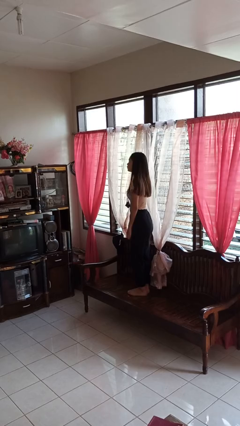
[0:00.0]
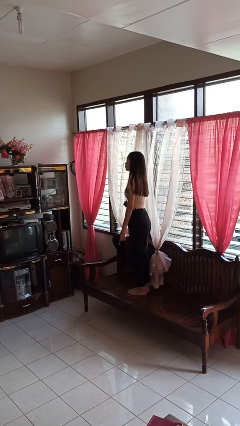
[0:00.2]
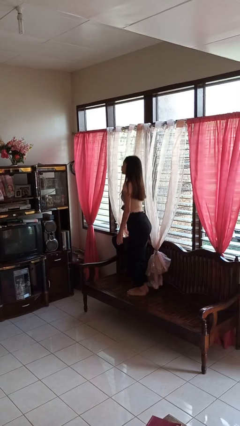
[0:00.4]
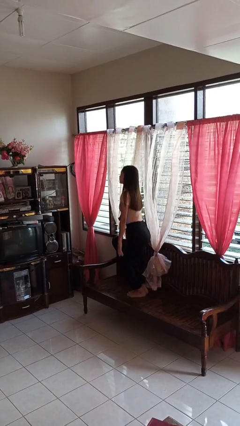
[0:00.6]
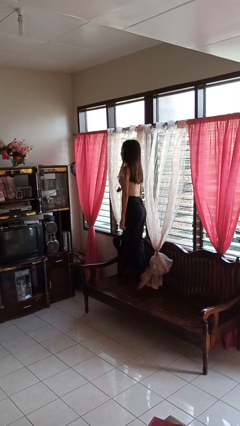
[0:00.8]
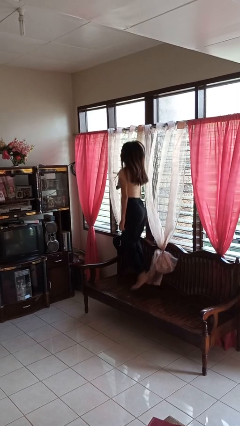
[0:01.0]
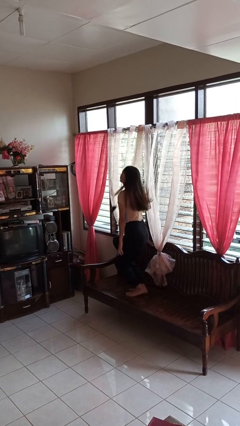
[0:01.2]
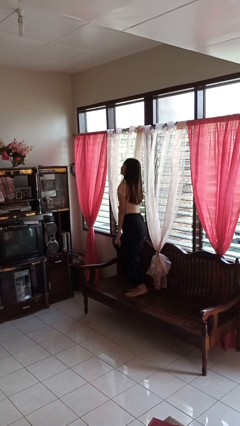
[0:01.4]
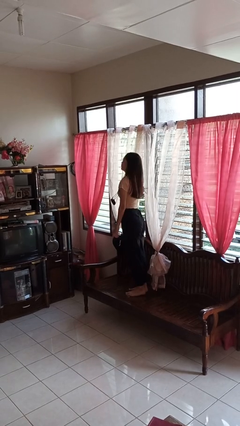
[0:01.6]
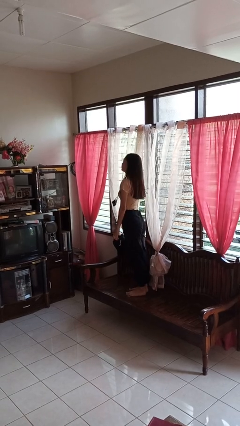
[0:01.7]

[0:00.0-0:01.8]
person jumps on couch

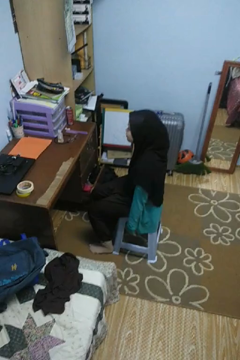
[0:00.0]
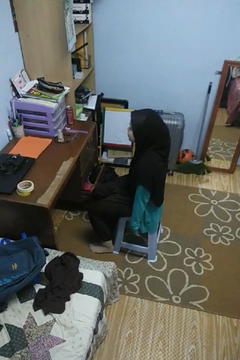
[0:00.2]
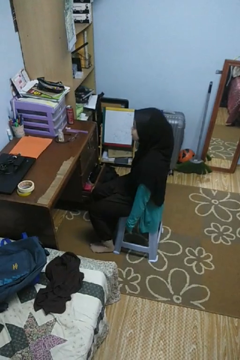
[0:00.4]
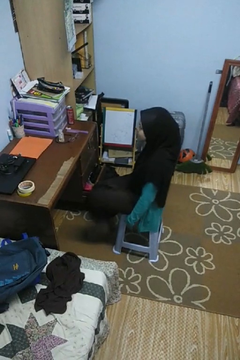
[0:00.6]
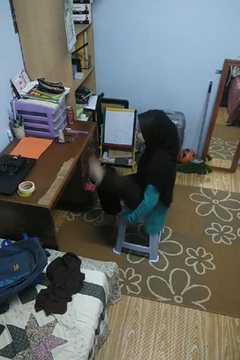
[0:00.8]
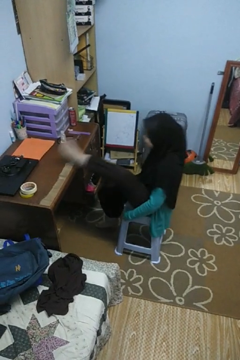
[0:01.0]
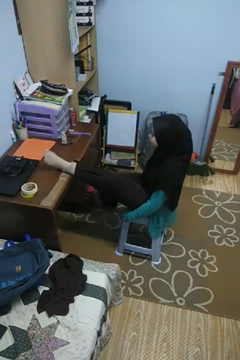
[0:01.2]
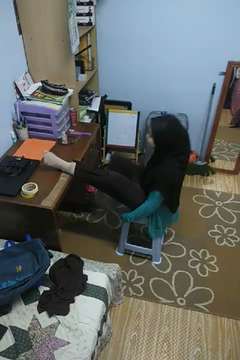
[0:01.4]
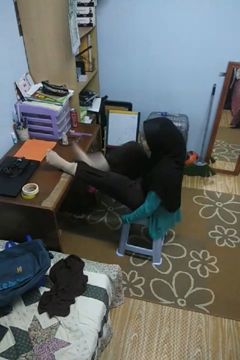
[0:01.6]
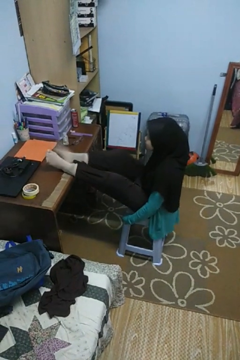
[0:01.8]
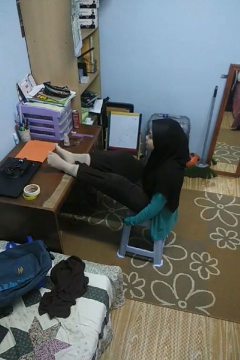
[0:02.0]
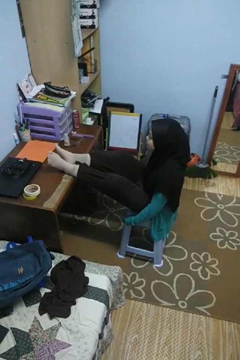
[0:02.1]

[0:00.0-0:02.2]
person puts feet up

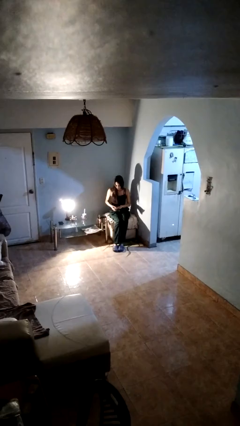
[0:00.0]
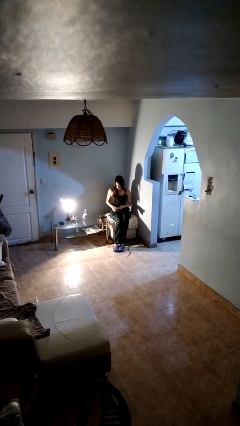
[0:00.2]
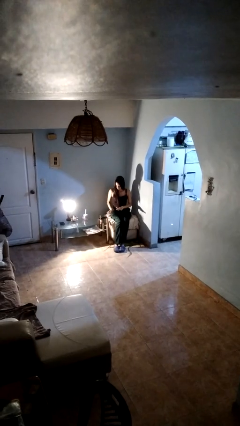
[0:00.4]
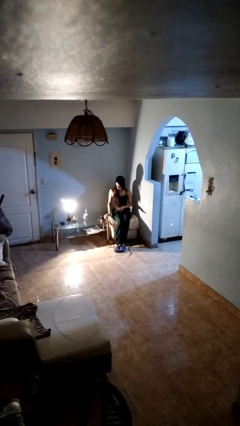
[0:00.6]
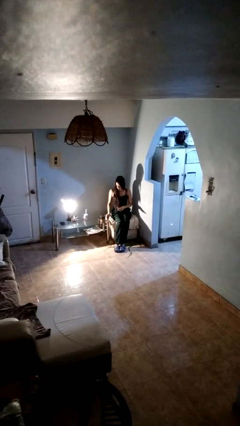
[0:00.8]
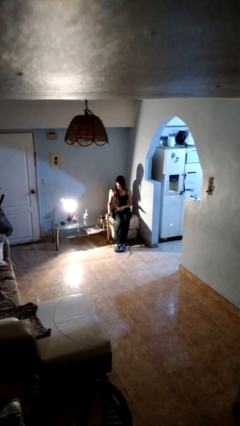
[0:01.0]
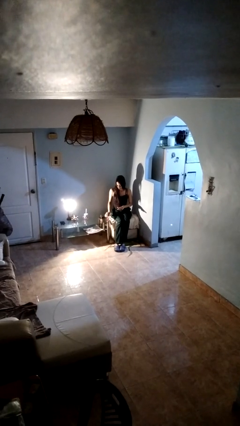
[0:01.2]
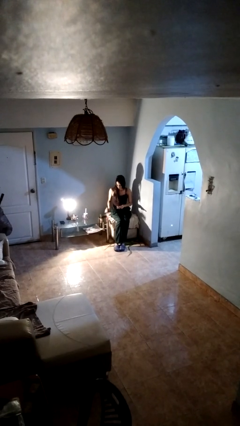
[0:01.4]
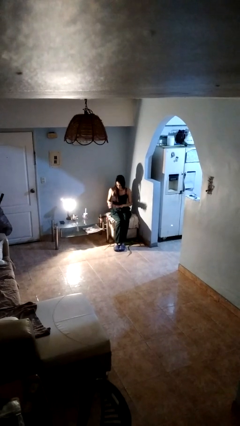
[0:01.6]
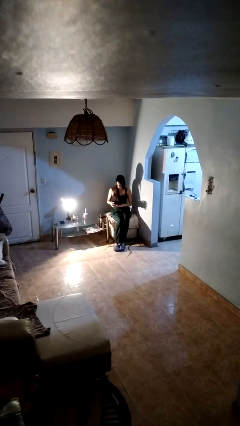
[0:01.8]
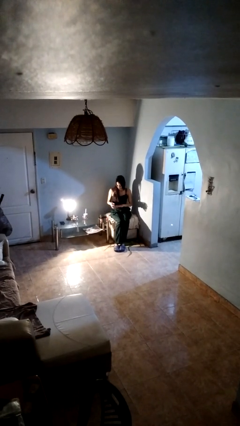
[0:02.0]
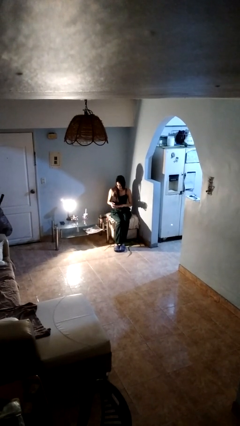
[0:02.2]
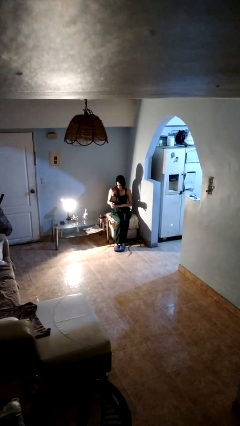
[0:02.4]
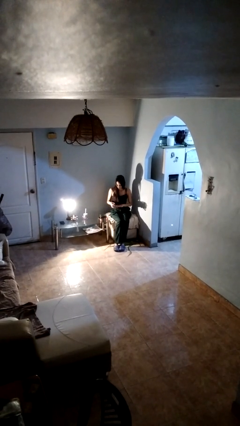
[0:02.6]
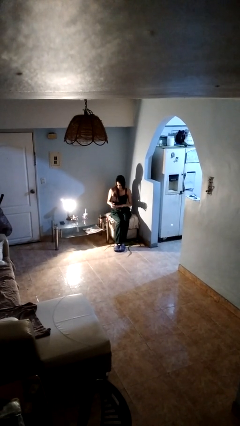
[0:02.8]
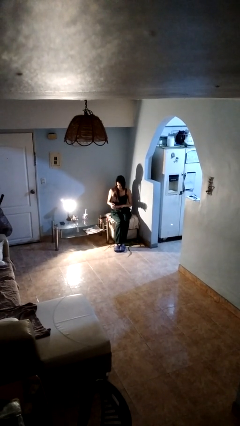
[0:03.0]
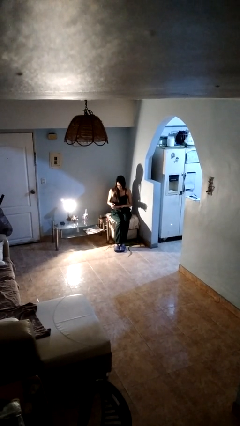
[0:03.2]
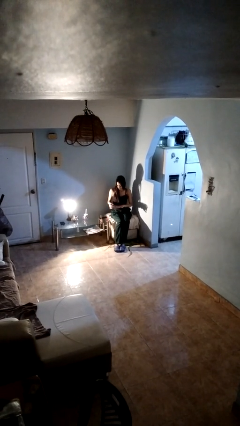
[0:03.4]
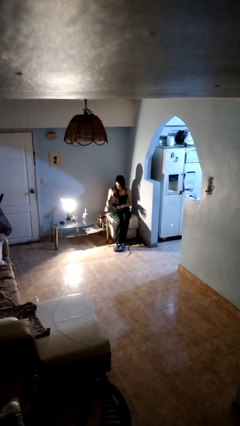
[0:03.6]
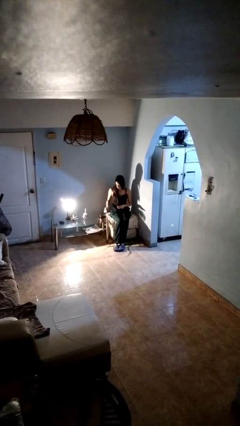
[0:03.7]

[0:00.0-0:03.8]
person paints fingernails

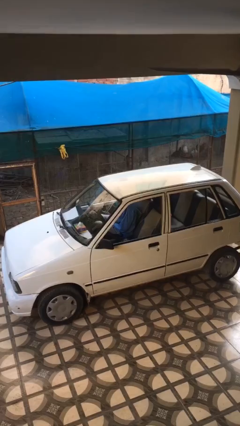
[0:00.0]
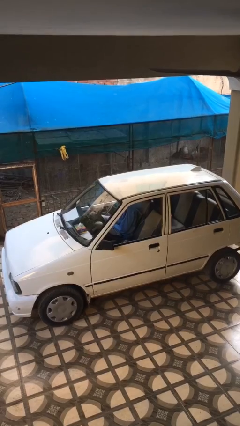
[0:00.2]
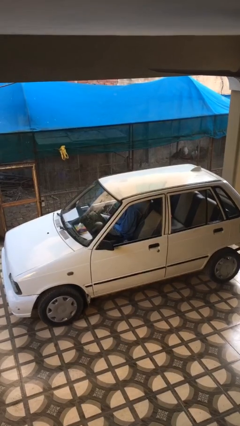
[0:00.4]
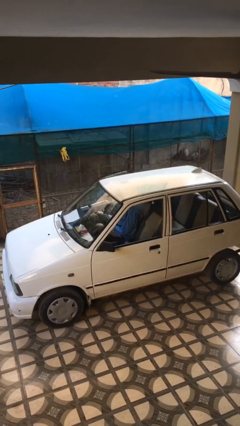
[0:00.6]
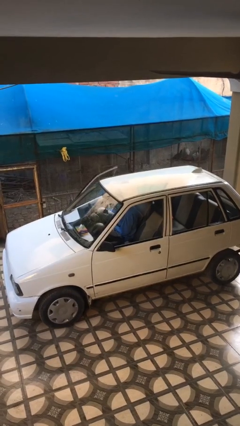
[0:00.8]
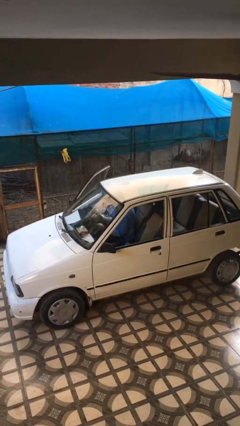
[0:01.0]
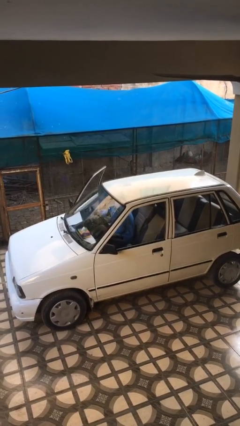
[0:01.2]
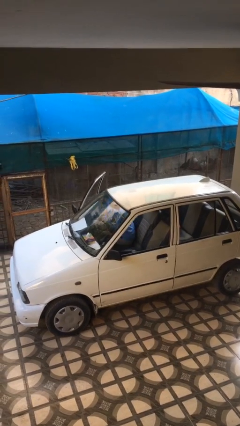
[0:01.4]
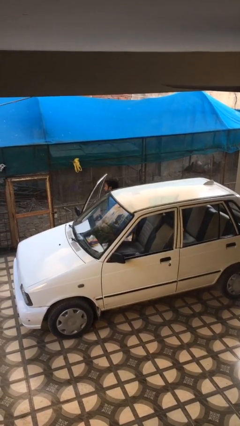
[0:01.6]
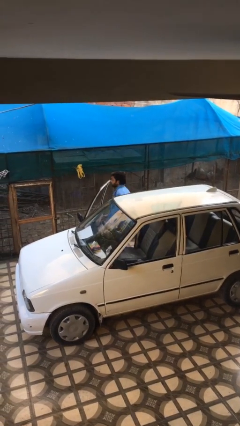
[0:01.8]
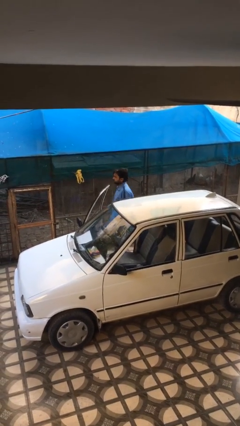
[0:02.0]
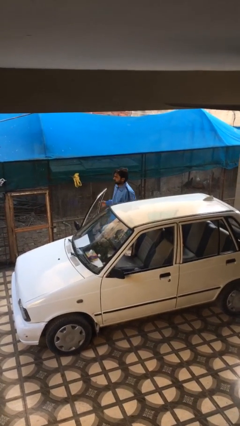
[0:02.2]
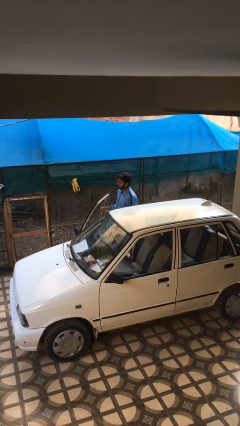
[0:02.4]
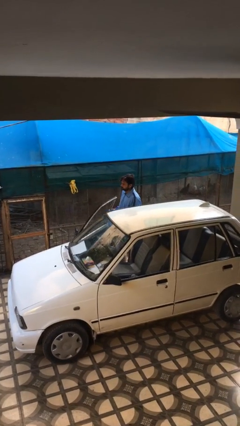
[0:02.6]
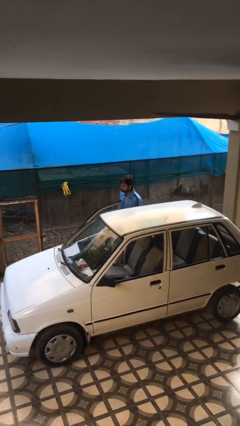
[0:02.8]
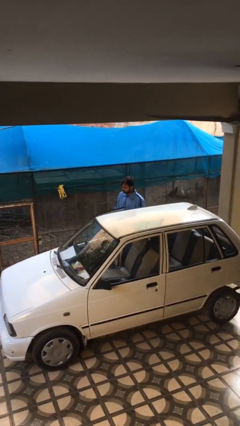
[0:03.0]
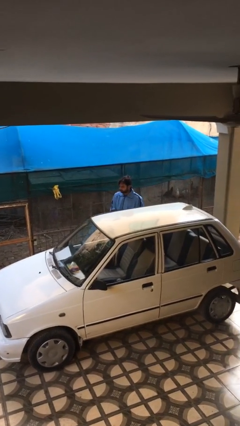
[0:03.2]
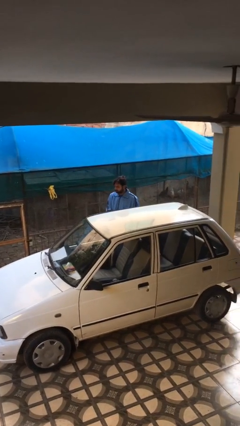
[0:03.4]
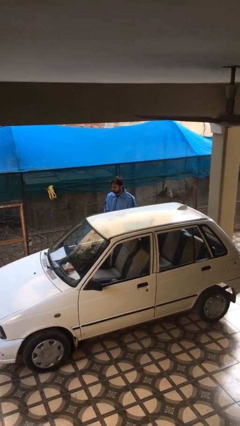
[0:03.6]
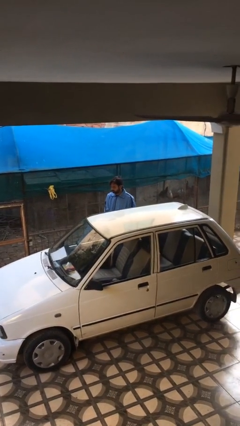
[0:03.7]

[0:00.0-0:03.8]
person exits car

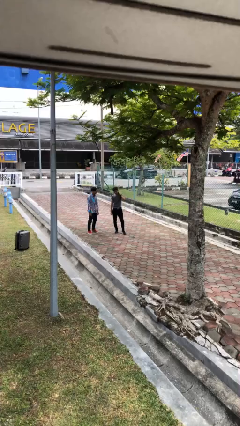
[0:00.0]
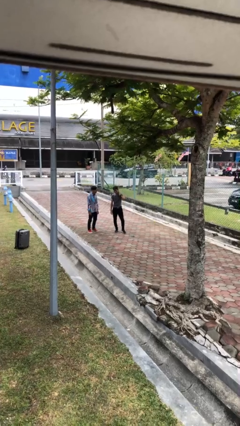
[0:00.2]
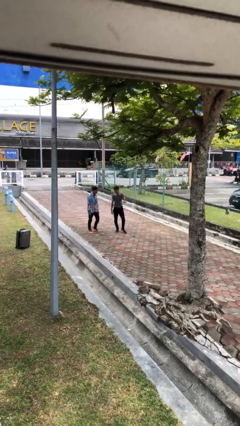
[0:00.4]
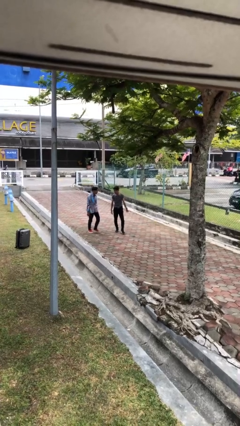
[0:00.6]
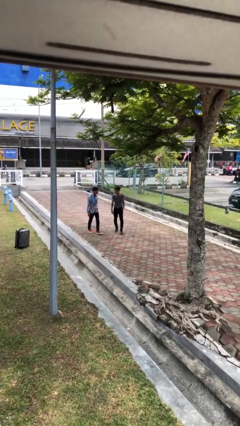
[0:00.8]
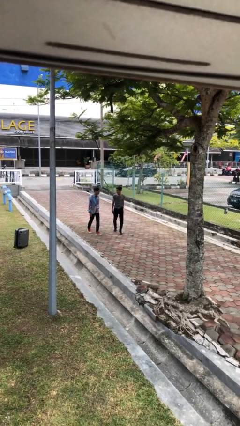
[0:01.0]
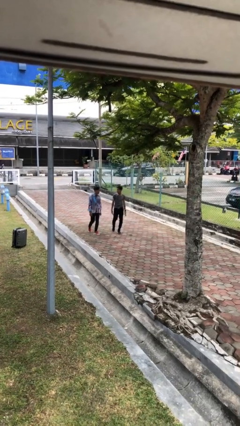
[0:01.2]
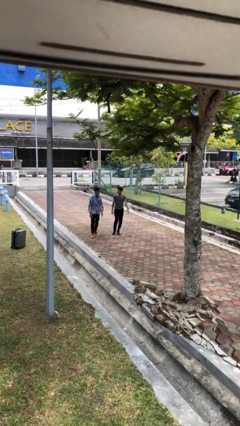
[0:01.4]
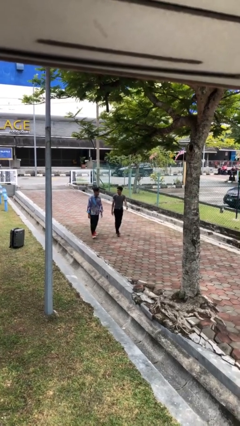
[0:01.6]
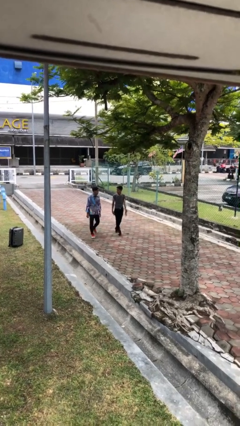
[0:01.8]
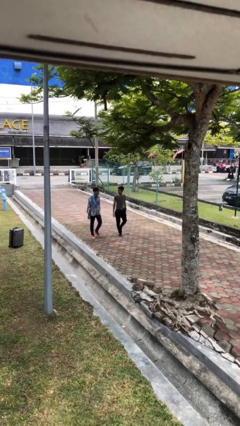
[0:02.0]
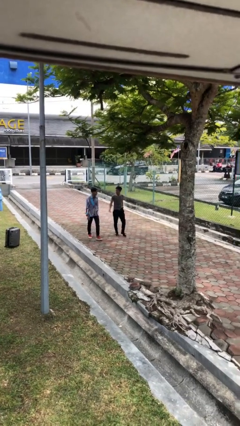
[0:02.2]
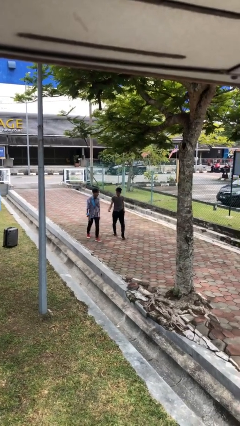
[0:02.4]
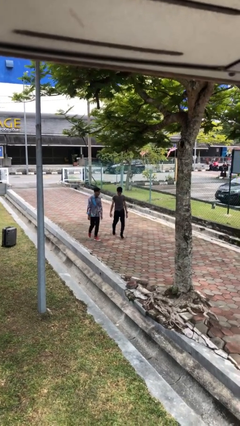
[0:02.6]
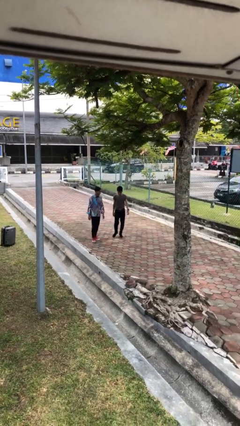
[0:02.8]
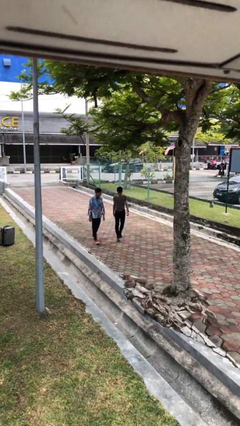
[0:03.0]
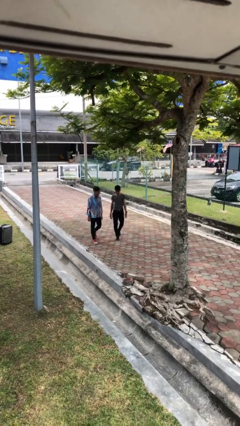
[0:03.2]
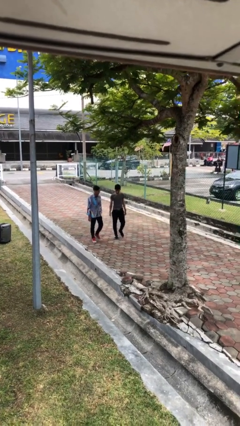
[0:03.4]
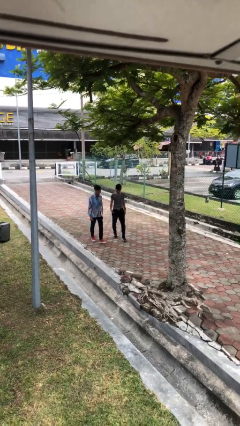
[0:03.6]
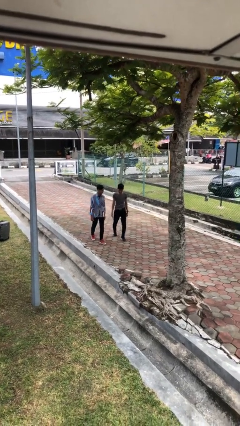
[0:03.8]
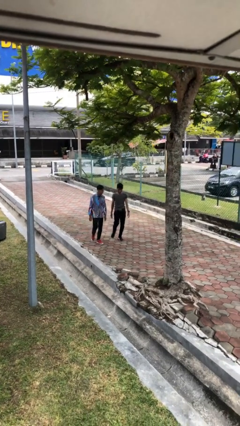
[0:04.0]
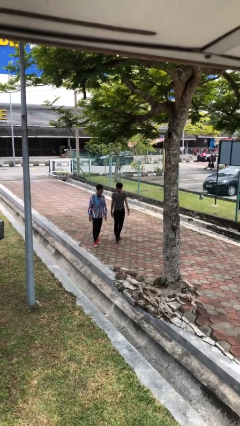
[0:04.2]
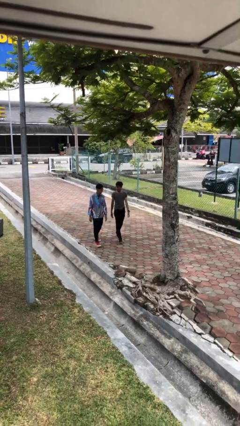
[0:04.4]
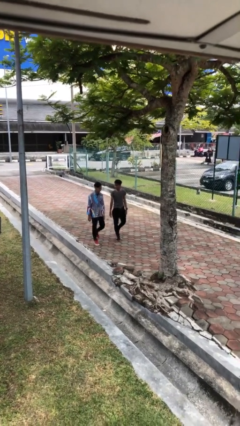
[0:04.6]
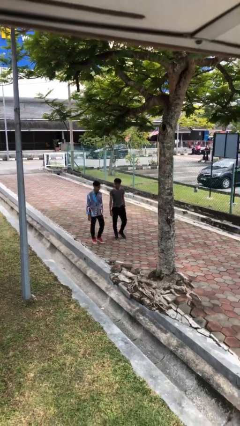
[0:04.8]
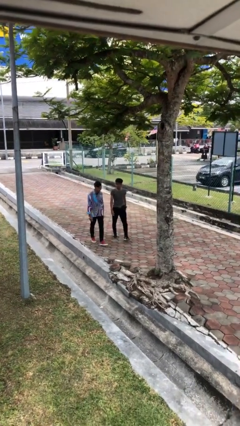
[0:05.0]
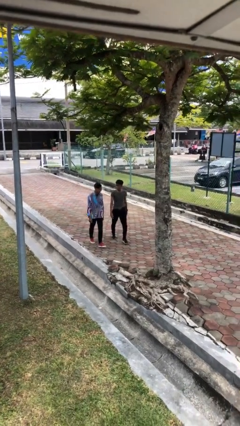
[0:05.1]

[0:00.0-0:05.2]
person talks to person

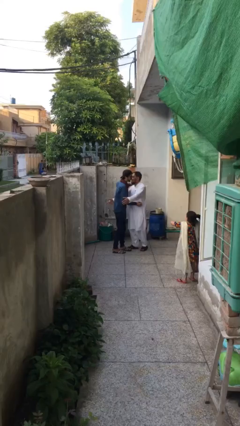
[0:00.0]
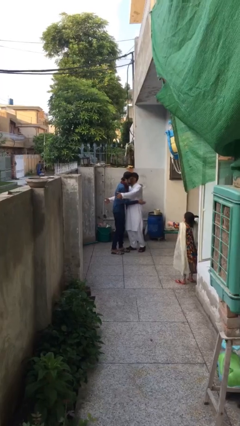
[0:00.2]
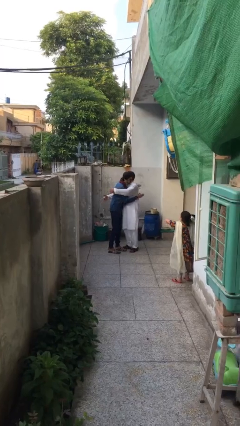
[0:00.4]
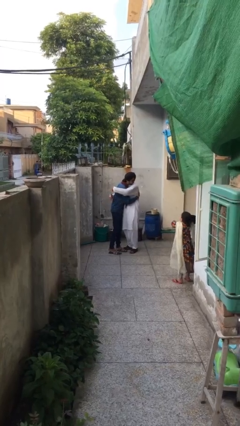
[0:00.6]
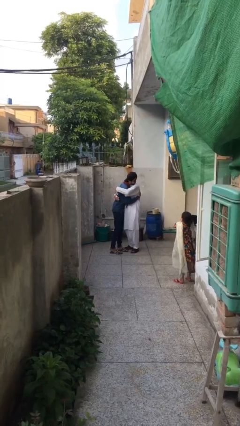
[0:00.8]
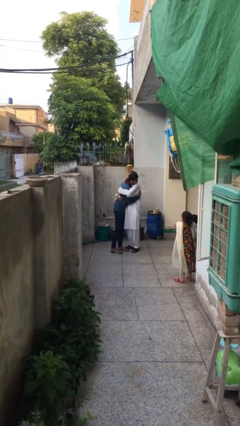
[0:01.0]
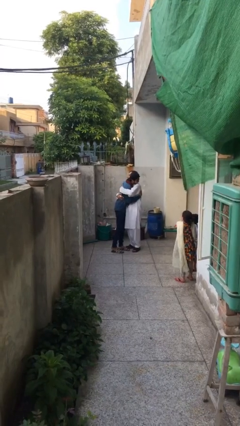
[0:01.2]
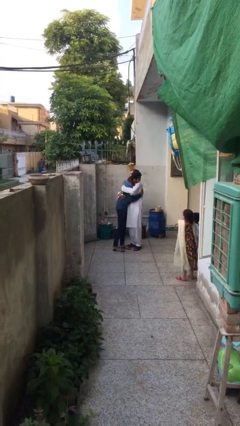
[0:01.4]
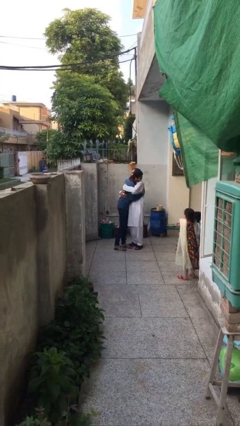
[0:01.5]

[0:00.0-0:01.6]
person embraces person
